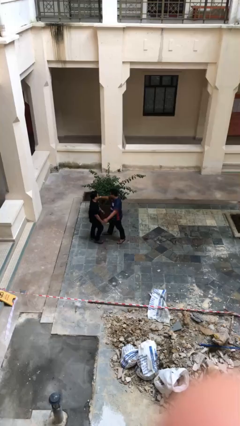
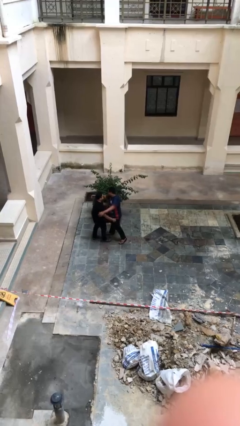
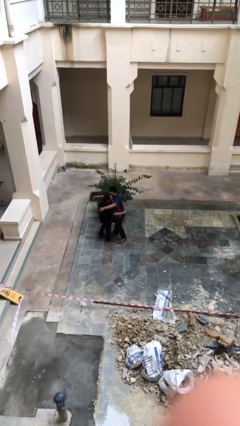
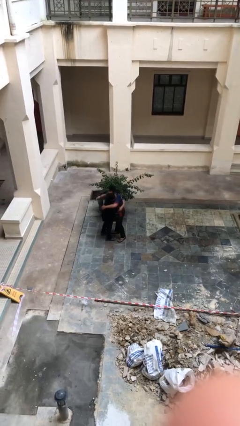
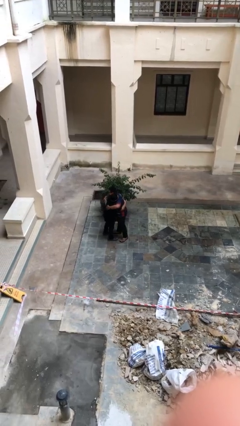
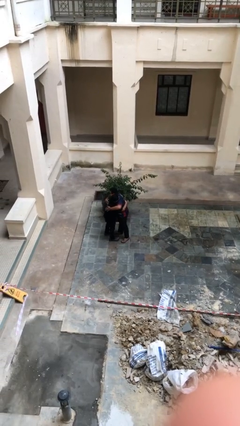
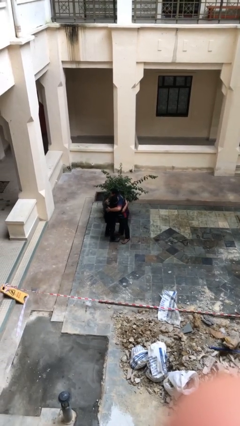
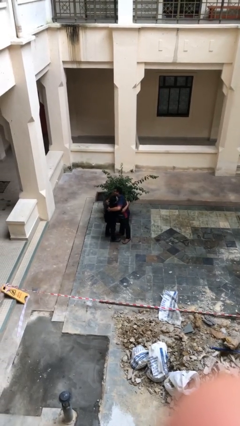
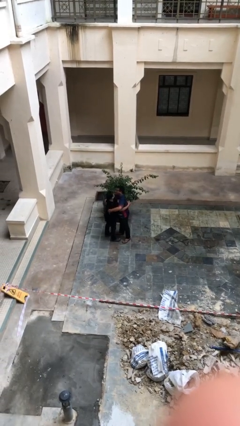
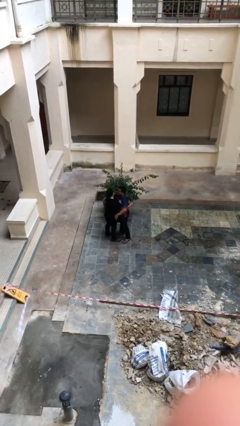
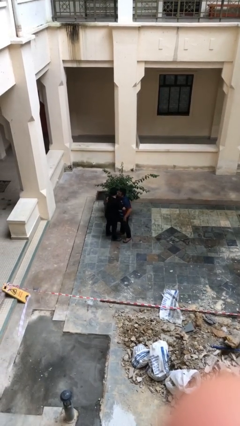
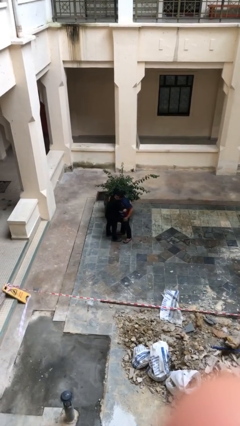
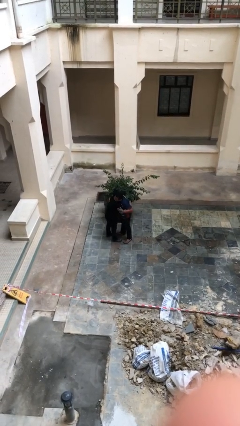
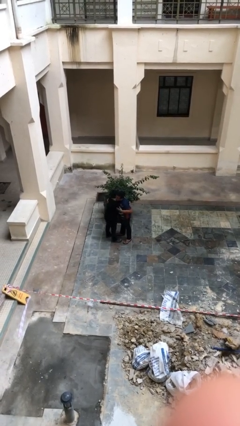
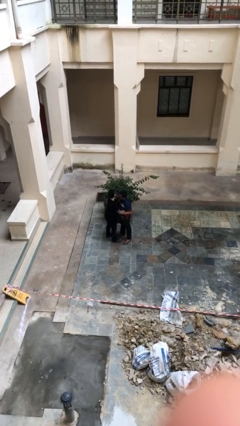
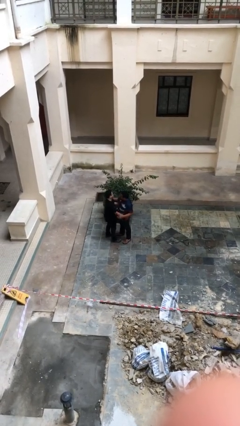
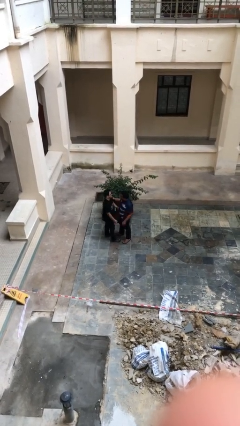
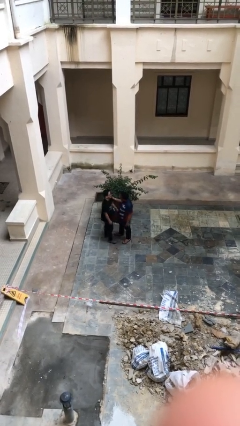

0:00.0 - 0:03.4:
person embraces person

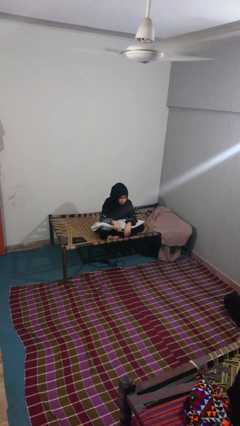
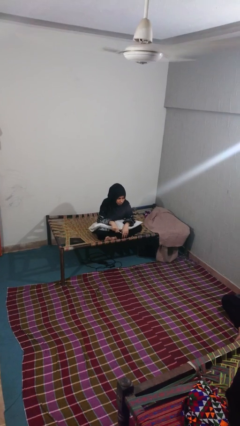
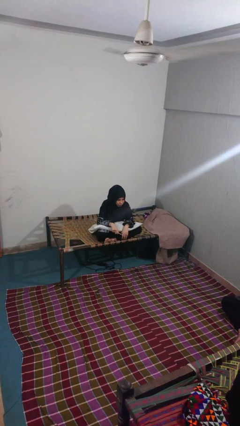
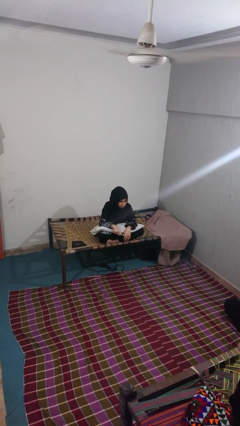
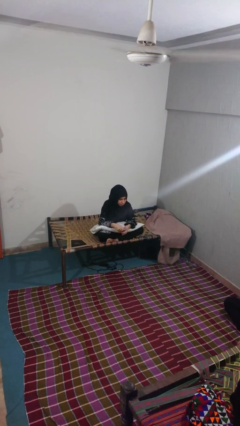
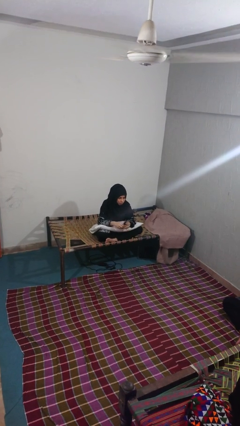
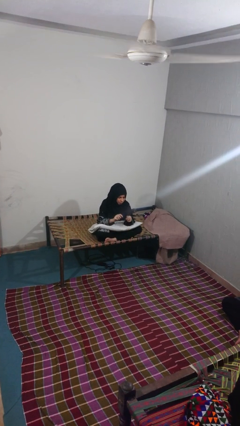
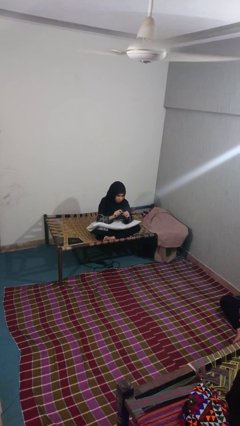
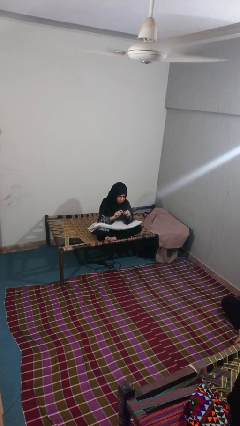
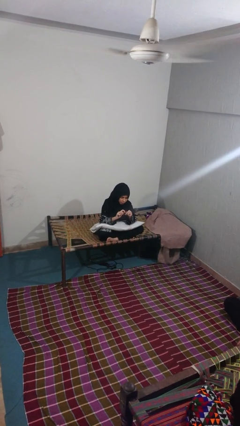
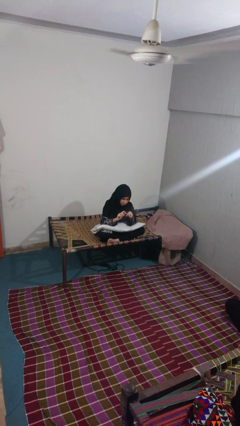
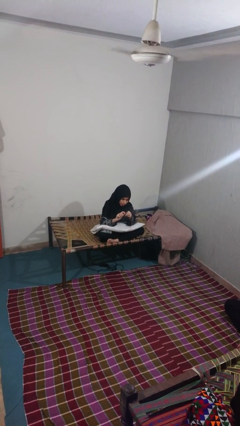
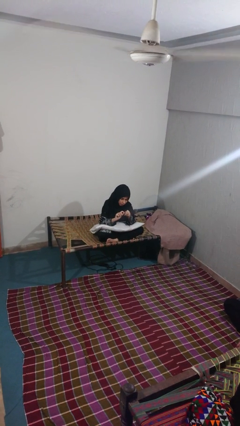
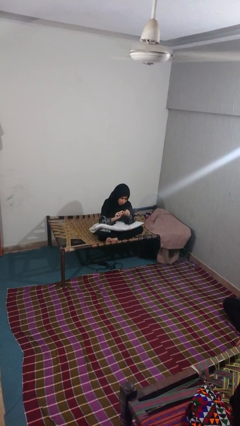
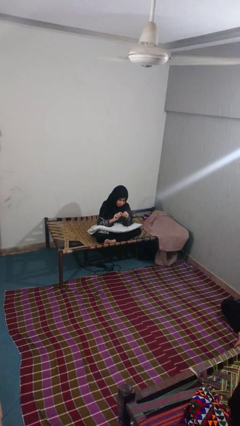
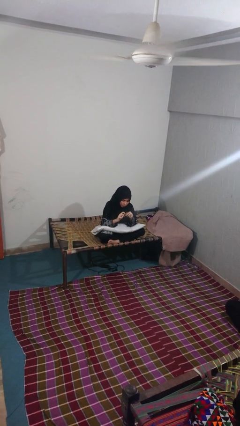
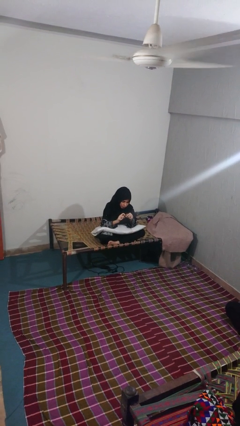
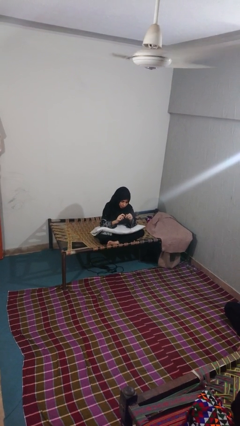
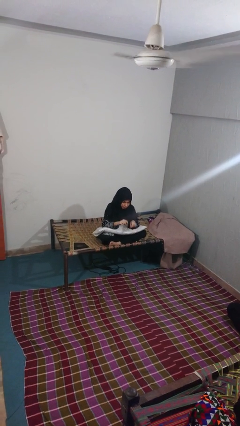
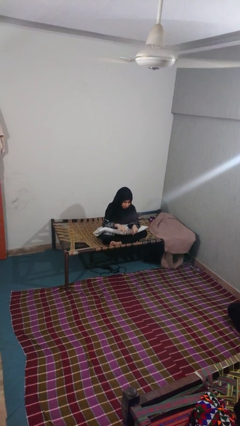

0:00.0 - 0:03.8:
person files fingernails

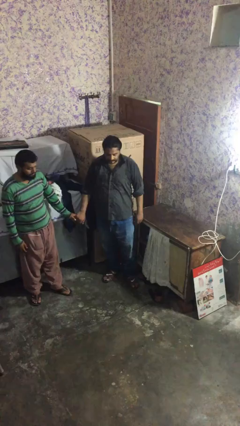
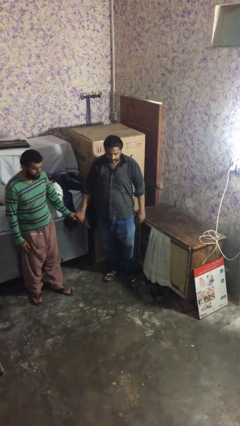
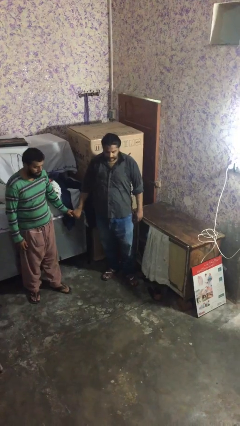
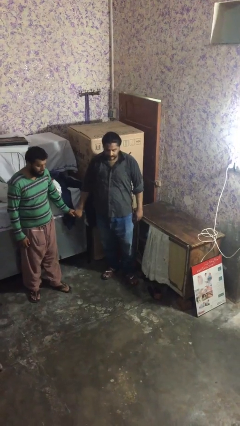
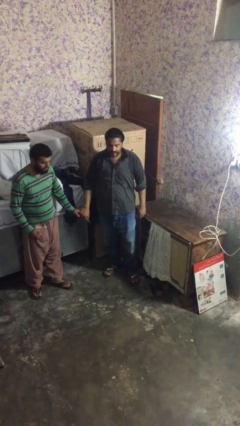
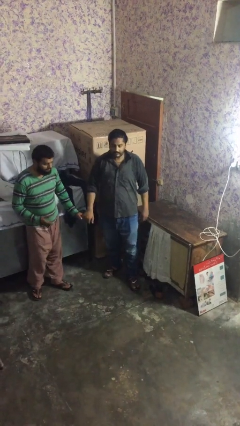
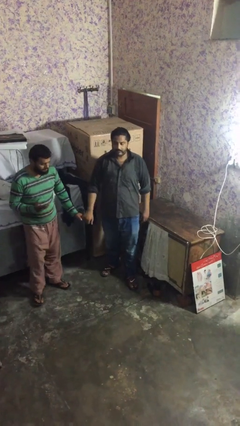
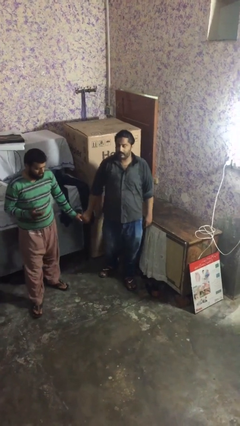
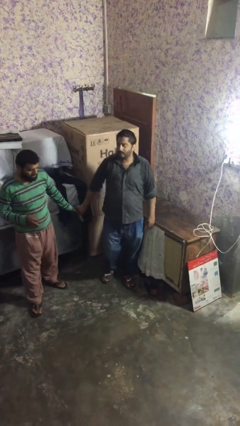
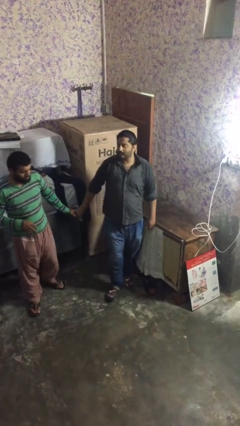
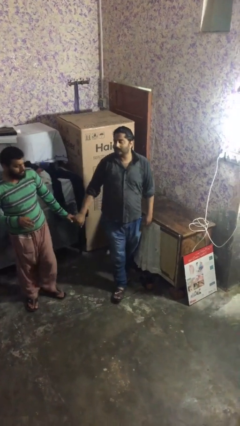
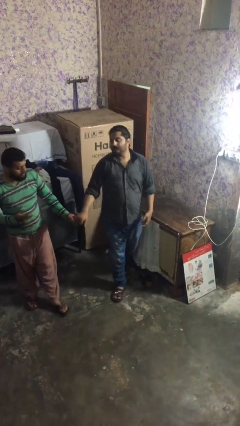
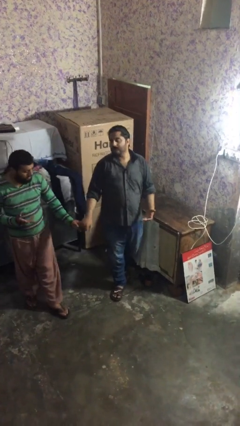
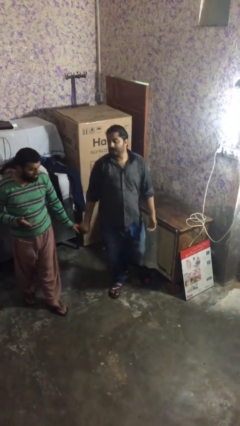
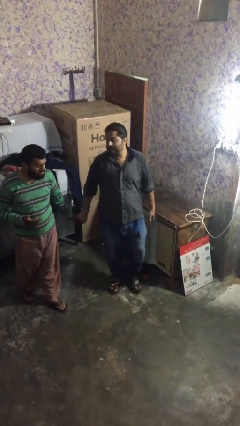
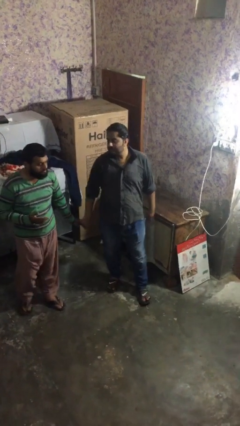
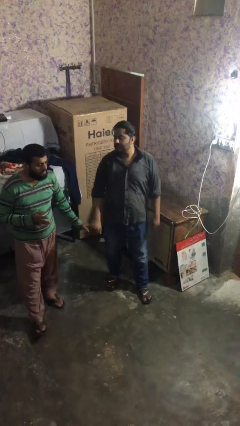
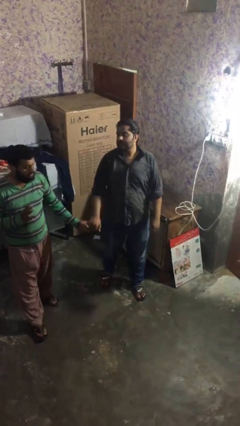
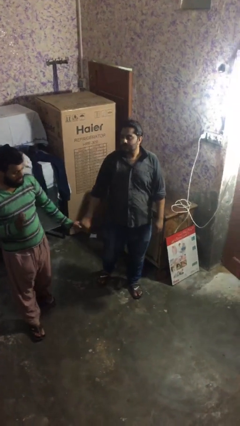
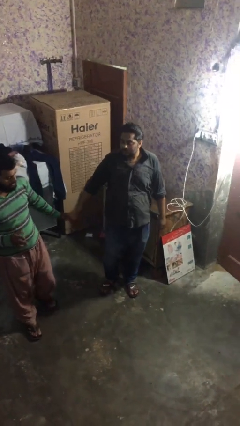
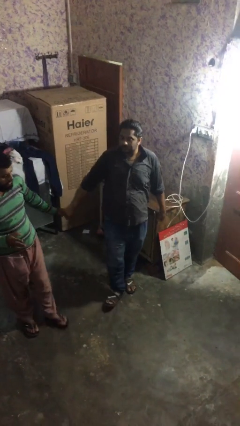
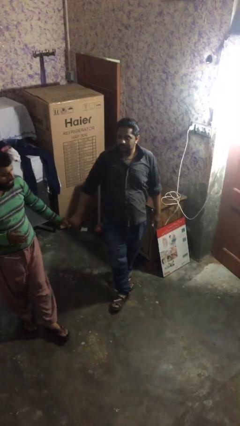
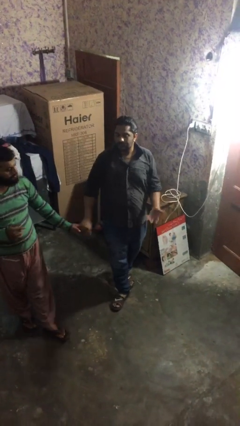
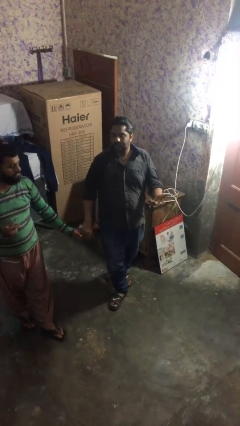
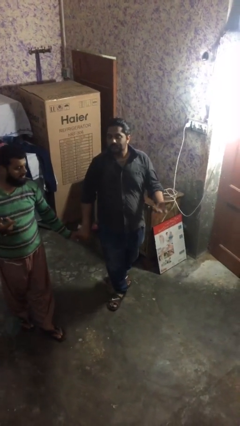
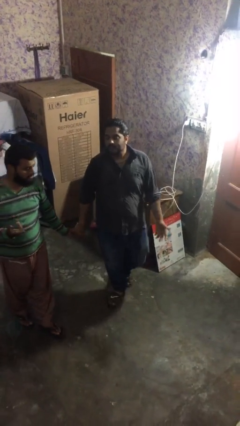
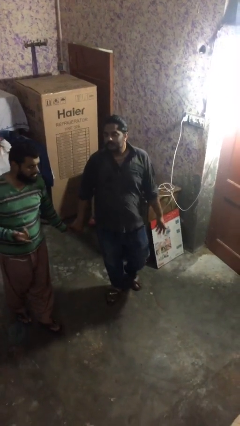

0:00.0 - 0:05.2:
person holds hand

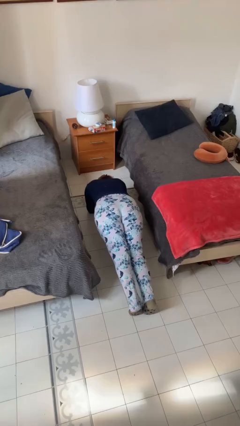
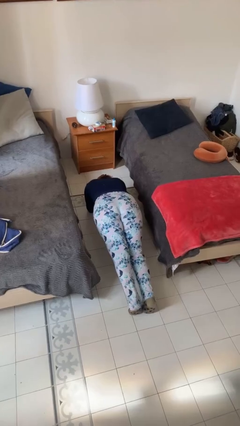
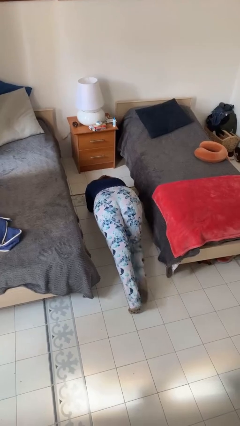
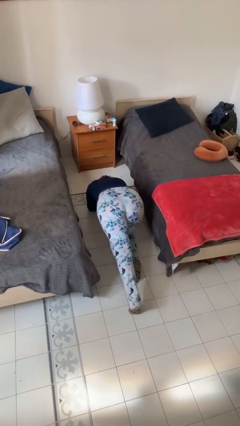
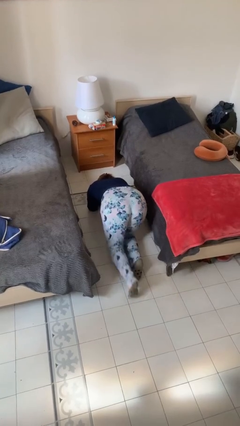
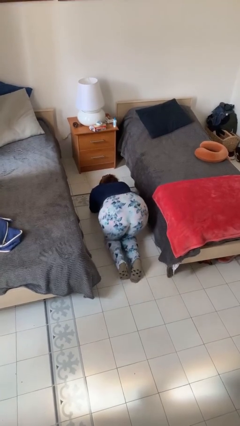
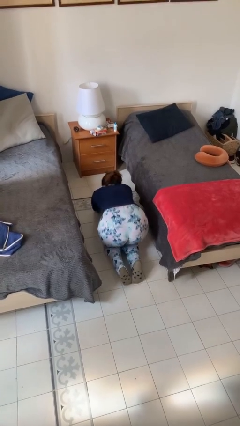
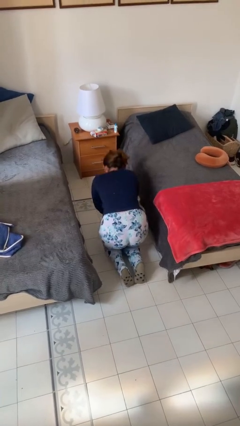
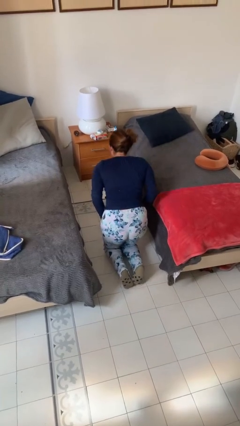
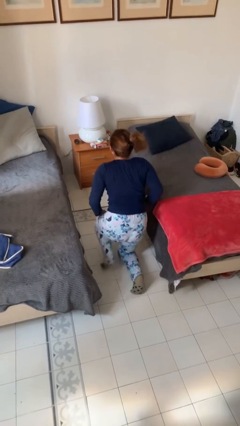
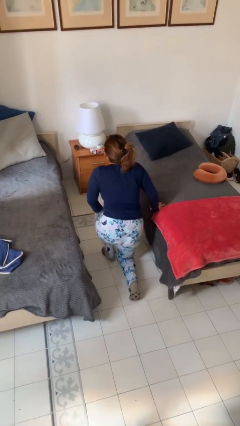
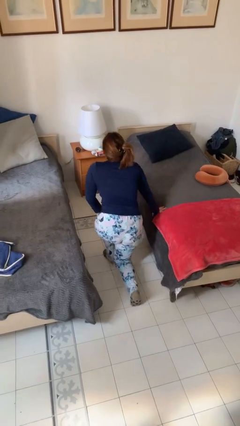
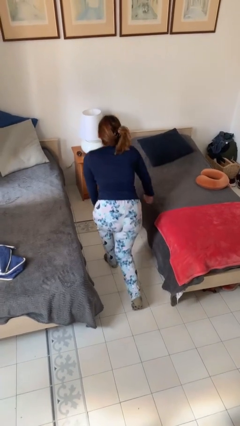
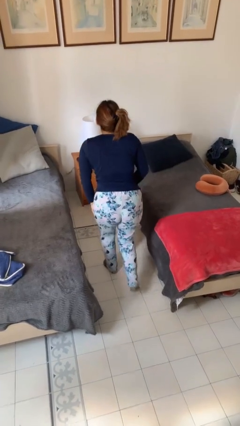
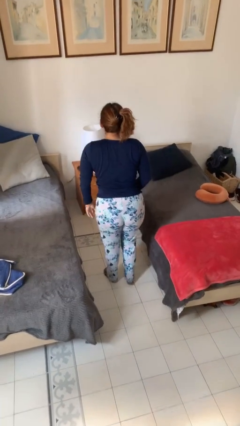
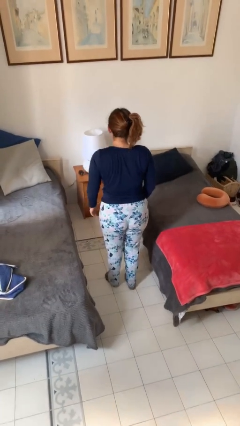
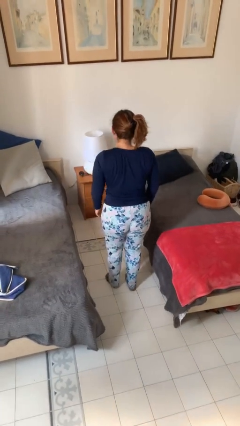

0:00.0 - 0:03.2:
person stands up from floor

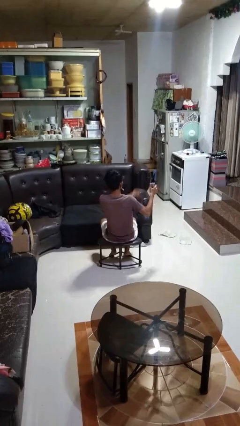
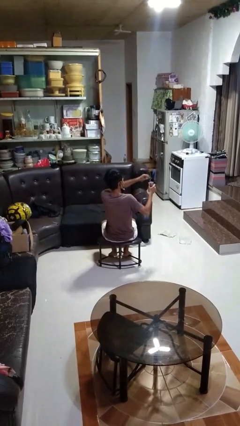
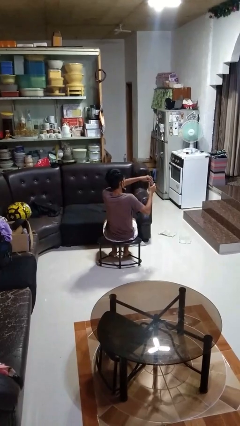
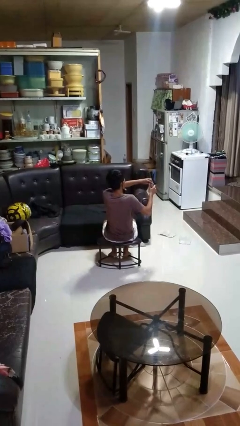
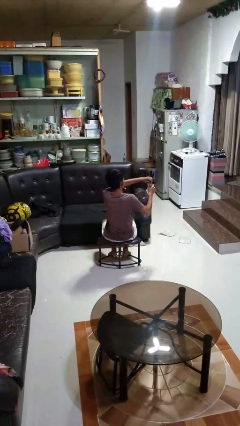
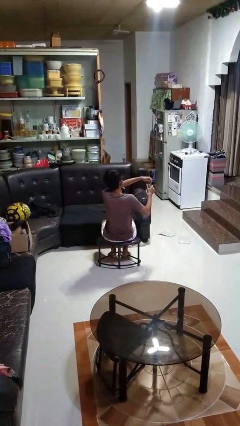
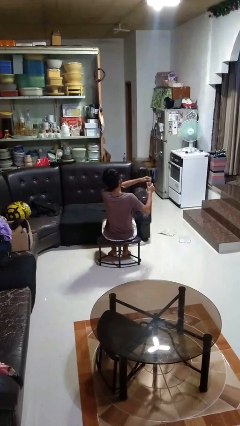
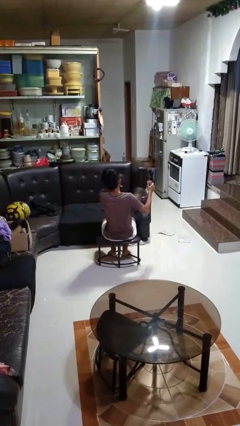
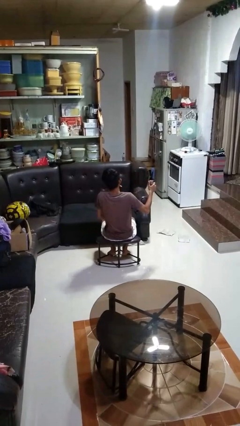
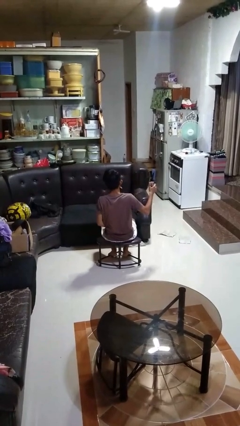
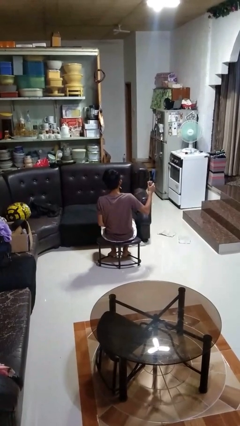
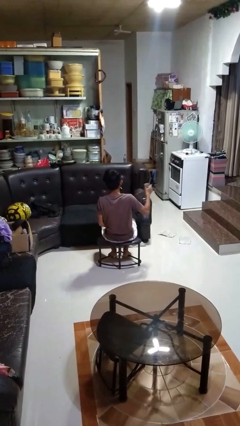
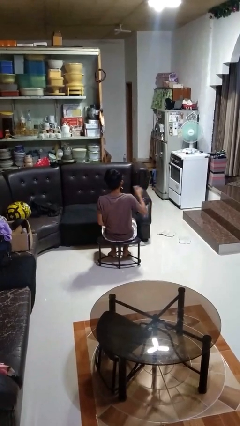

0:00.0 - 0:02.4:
person opens beverage can
